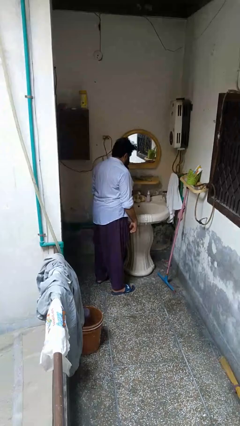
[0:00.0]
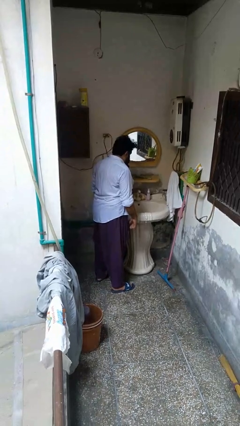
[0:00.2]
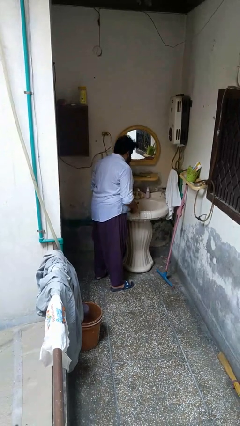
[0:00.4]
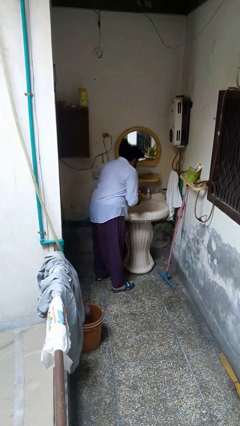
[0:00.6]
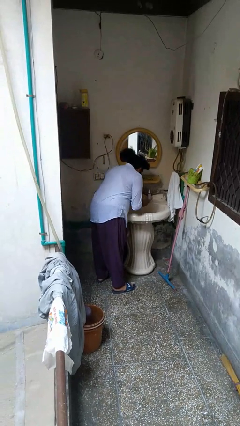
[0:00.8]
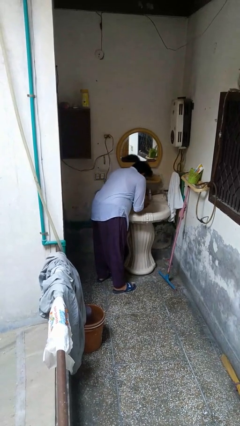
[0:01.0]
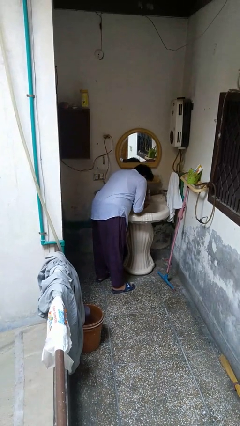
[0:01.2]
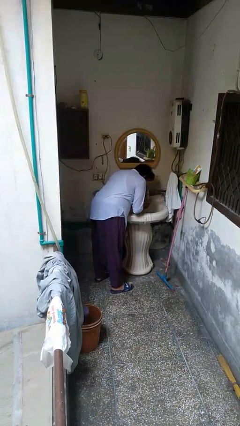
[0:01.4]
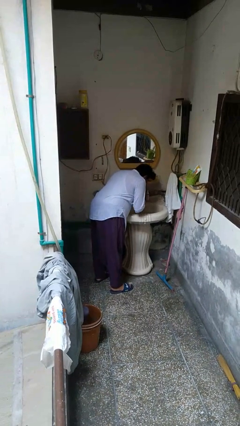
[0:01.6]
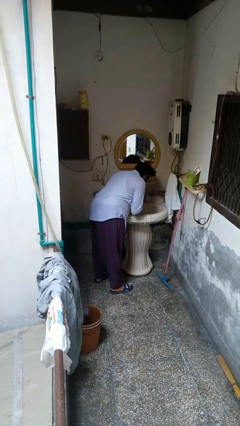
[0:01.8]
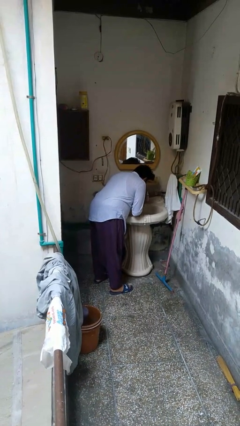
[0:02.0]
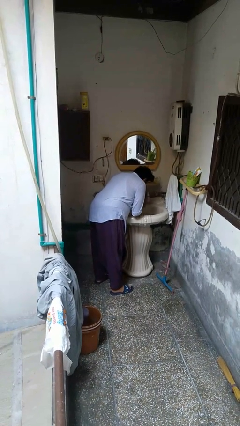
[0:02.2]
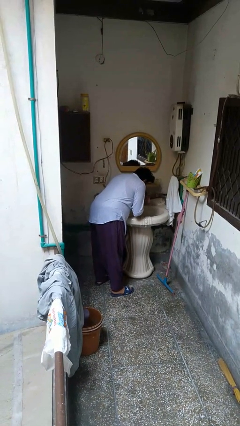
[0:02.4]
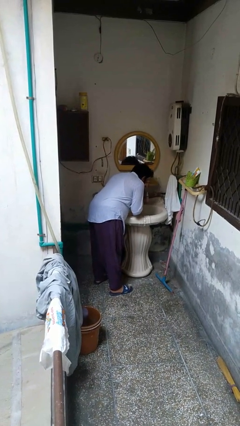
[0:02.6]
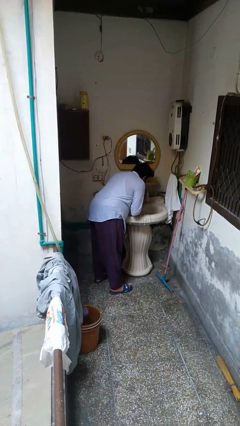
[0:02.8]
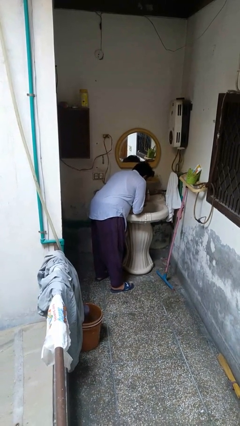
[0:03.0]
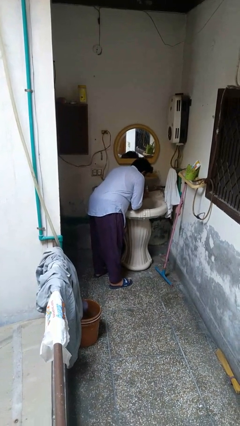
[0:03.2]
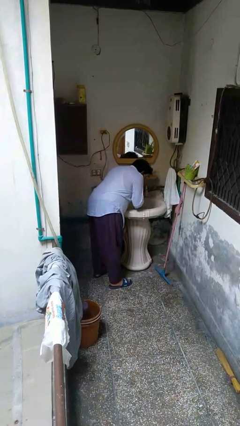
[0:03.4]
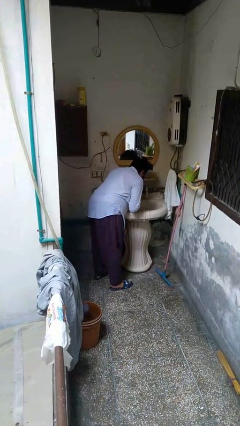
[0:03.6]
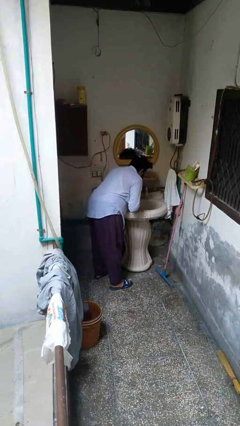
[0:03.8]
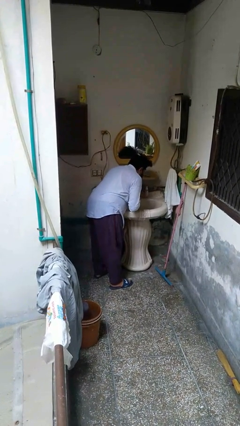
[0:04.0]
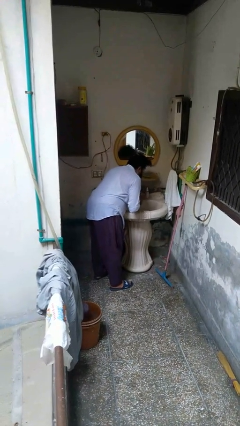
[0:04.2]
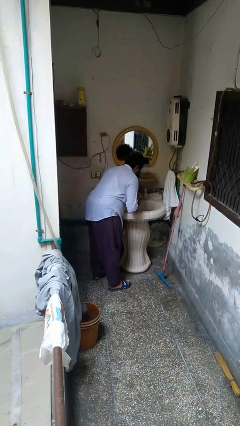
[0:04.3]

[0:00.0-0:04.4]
person washes face

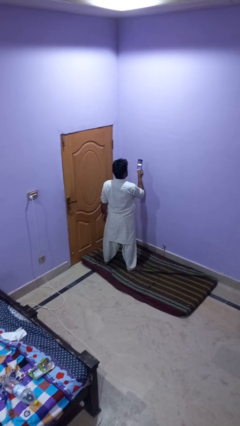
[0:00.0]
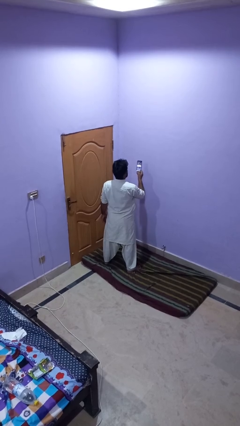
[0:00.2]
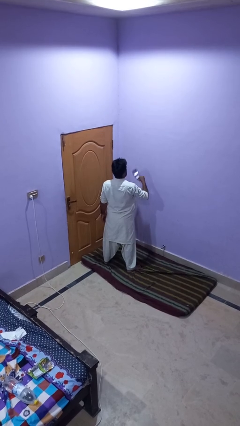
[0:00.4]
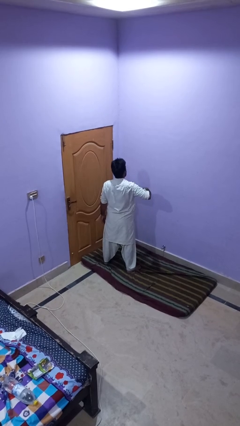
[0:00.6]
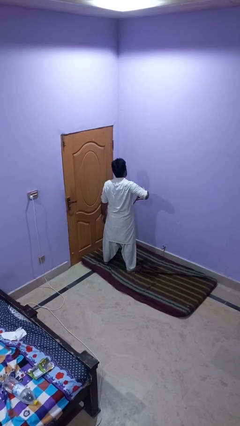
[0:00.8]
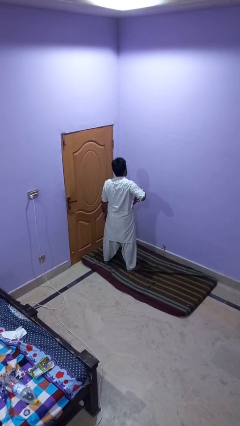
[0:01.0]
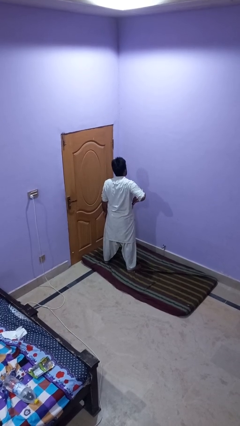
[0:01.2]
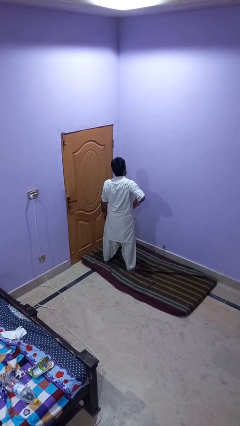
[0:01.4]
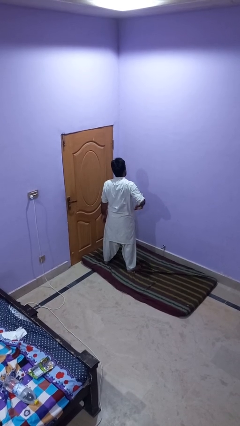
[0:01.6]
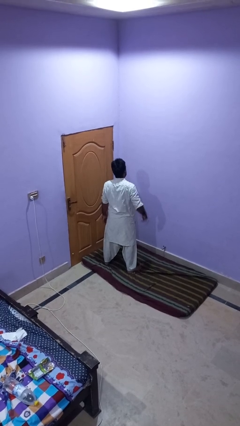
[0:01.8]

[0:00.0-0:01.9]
person puts phone into pocket

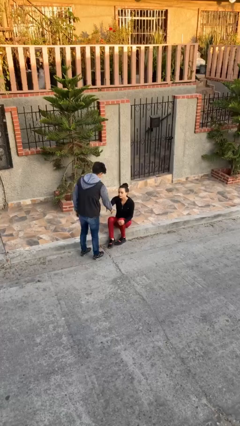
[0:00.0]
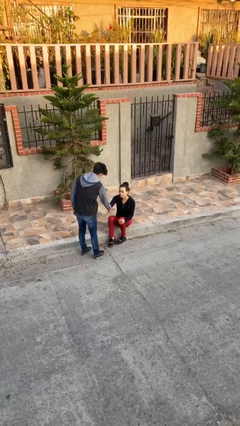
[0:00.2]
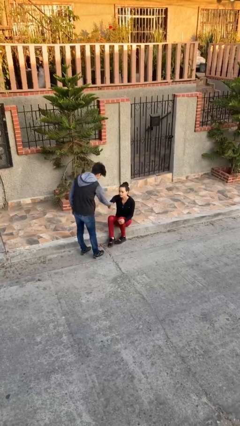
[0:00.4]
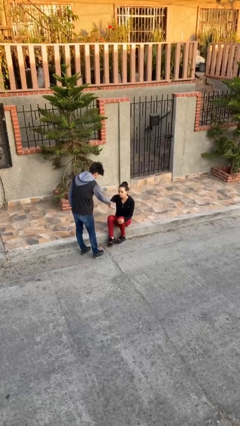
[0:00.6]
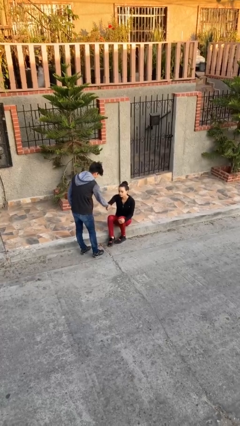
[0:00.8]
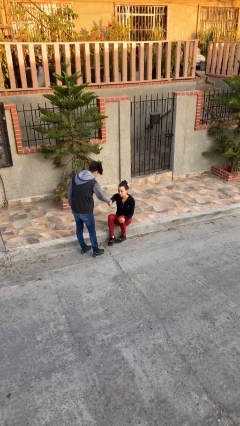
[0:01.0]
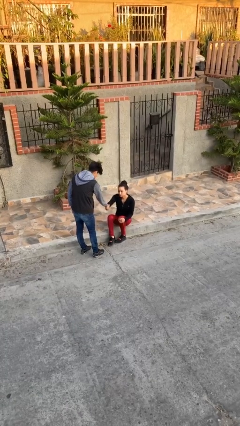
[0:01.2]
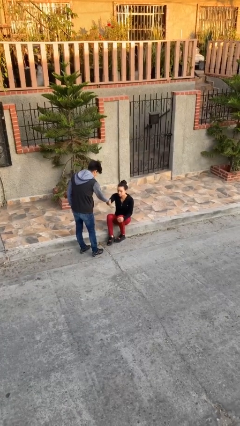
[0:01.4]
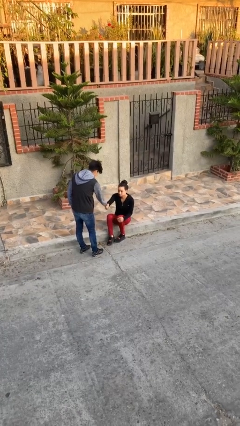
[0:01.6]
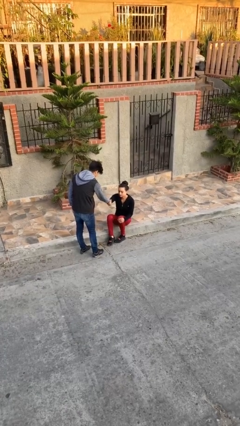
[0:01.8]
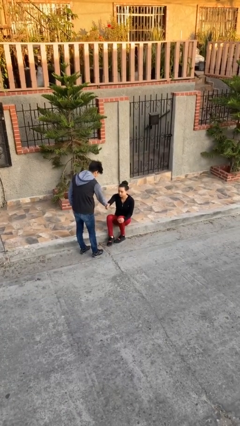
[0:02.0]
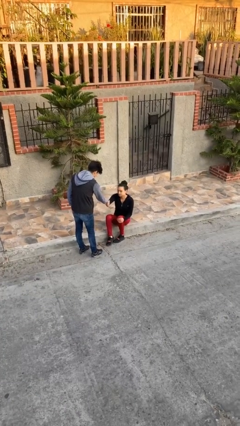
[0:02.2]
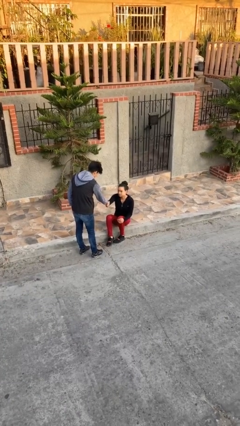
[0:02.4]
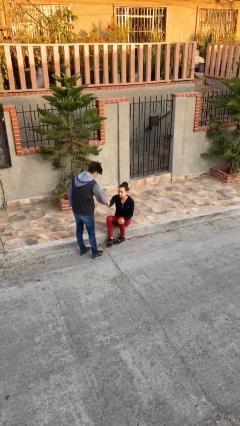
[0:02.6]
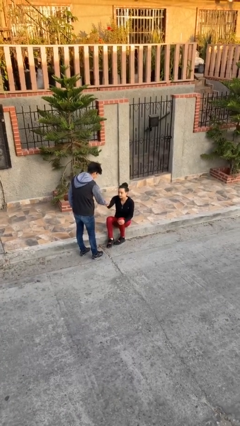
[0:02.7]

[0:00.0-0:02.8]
person shakes hand

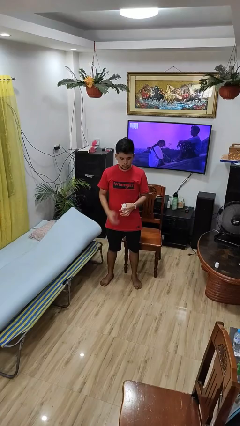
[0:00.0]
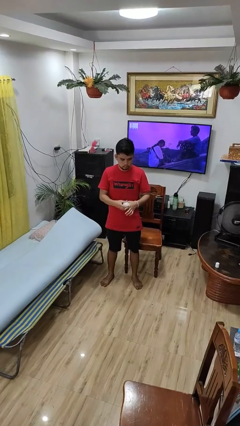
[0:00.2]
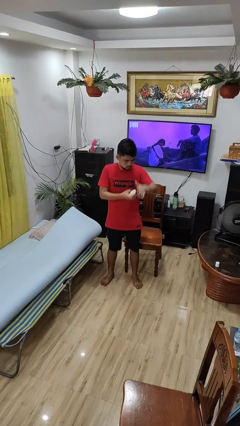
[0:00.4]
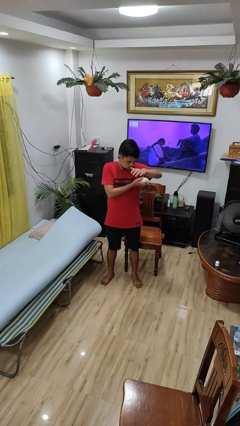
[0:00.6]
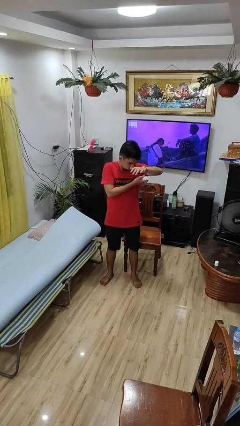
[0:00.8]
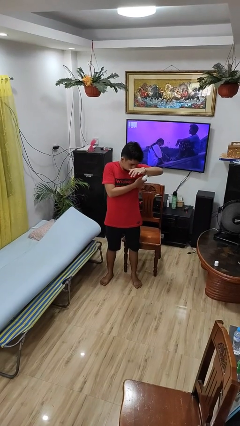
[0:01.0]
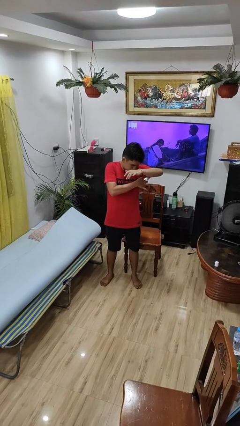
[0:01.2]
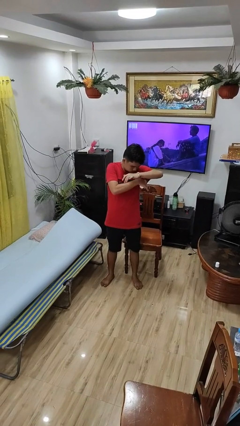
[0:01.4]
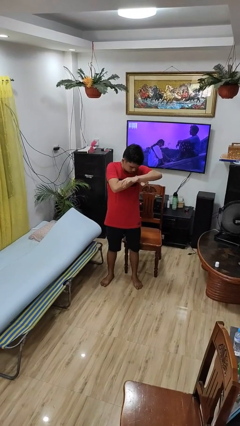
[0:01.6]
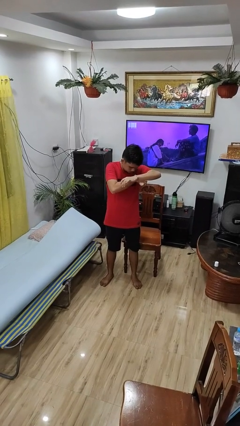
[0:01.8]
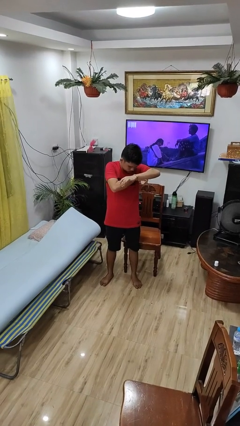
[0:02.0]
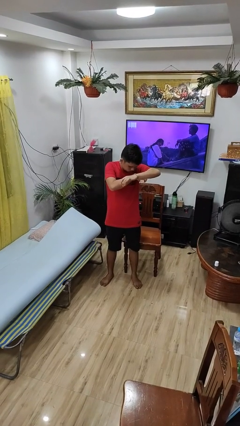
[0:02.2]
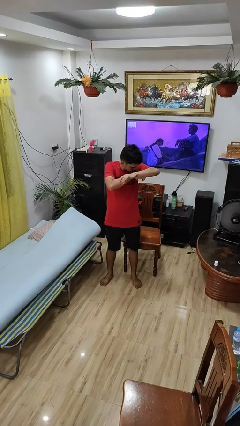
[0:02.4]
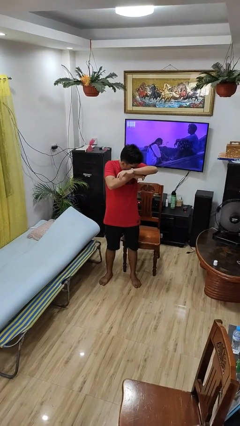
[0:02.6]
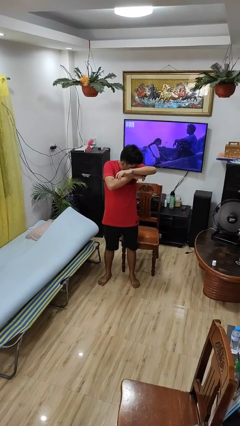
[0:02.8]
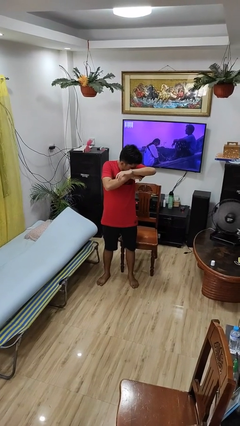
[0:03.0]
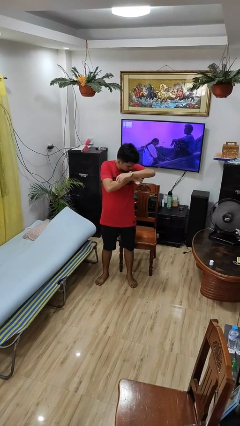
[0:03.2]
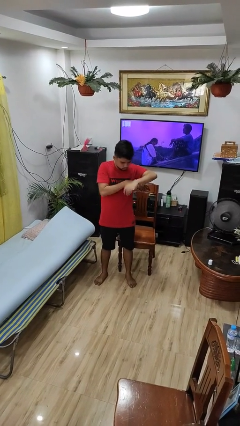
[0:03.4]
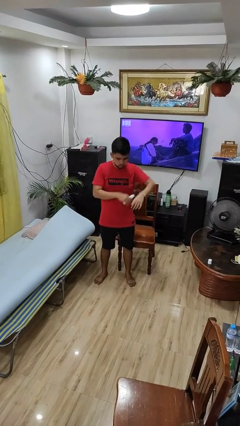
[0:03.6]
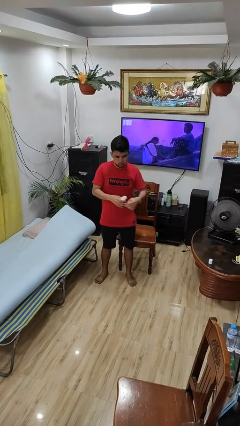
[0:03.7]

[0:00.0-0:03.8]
person applies deodorant

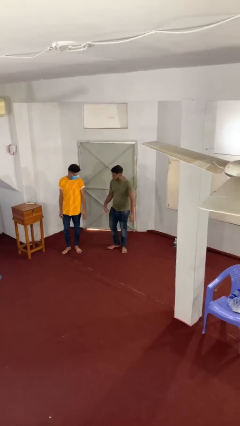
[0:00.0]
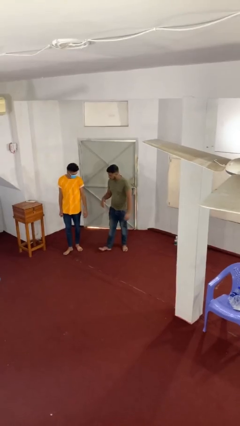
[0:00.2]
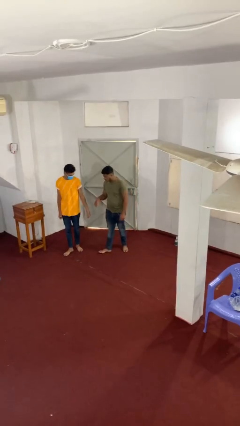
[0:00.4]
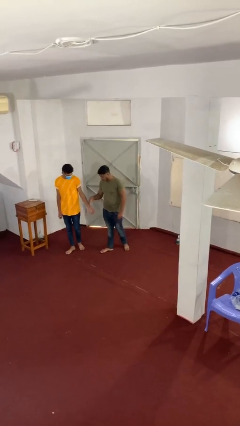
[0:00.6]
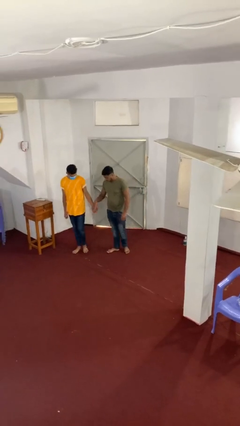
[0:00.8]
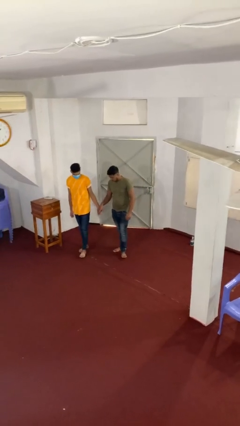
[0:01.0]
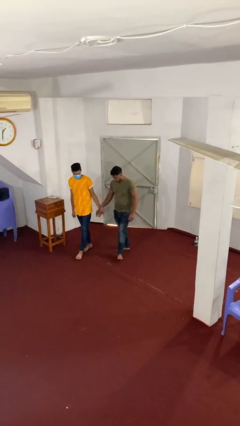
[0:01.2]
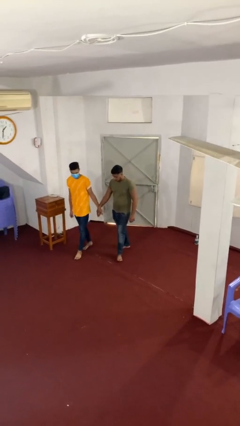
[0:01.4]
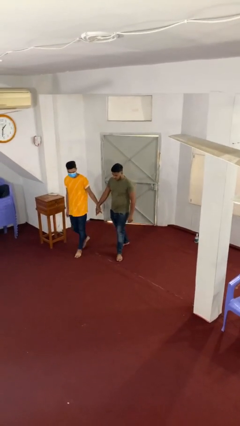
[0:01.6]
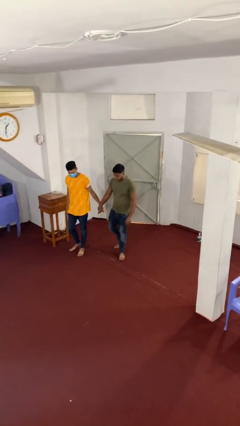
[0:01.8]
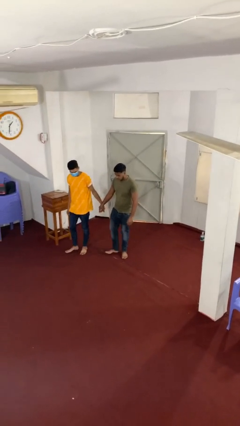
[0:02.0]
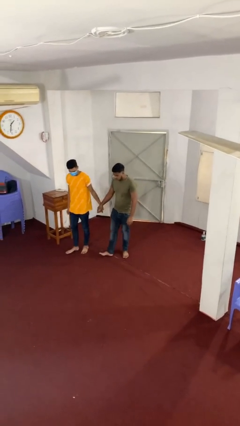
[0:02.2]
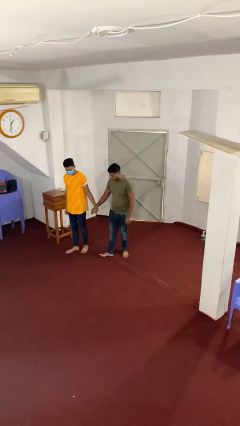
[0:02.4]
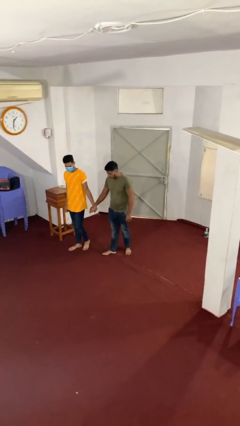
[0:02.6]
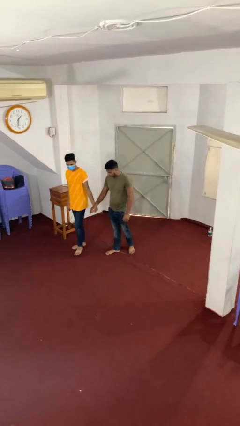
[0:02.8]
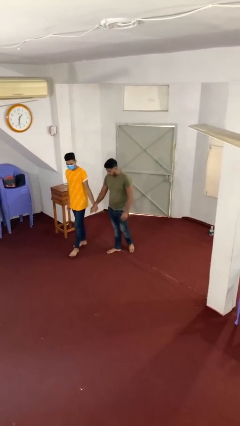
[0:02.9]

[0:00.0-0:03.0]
person holds hand

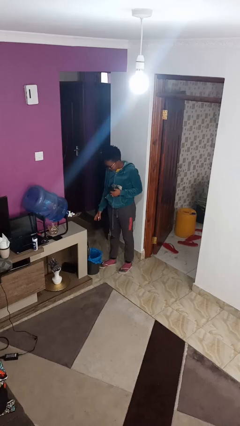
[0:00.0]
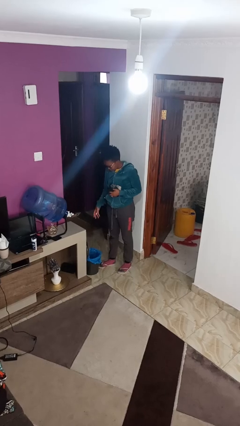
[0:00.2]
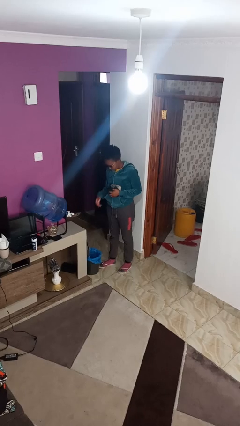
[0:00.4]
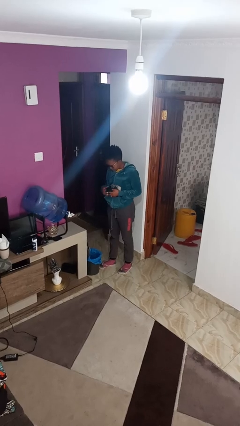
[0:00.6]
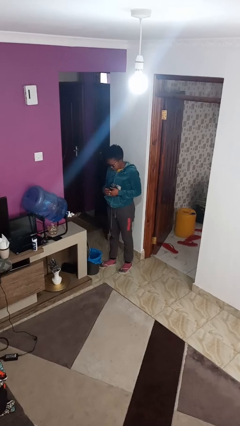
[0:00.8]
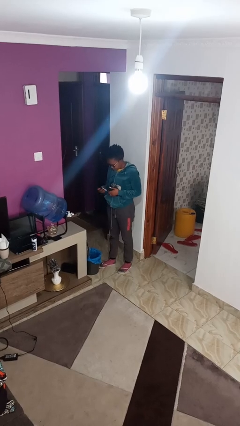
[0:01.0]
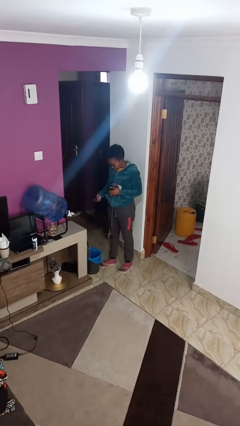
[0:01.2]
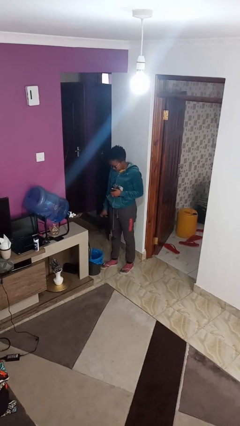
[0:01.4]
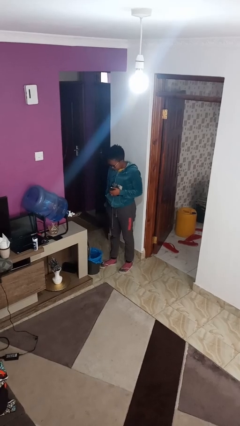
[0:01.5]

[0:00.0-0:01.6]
person discards trash
